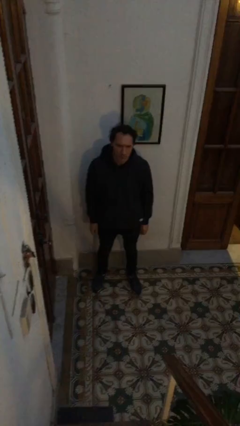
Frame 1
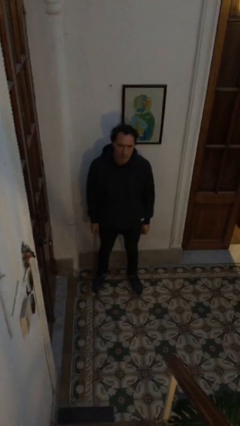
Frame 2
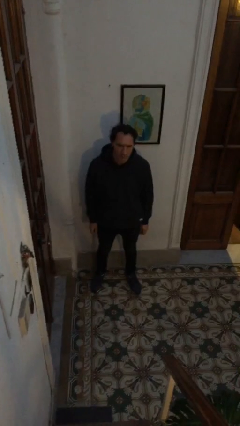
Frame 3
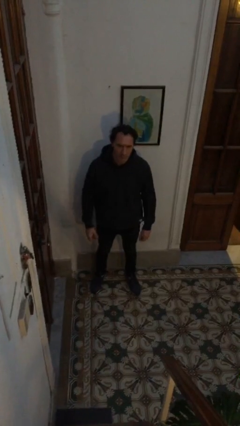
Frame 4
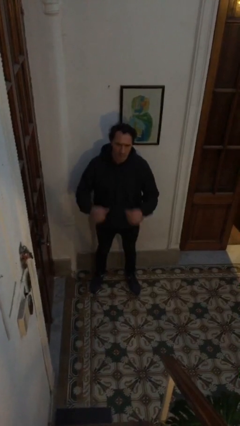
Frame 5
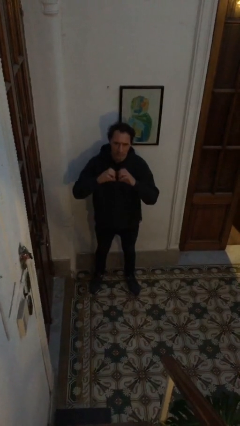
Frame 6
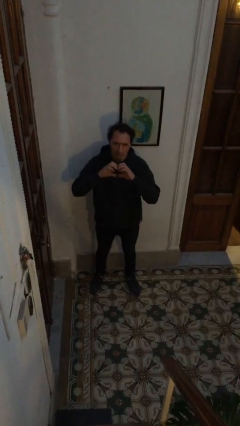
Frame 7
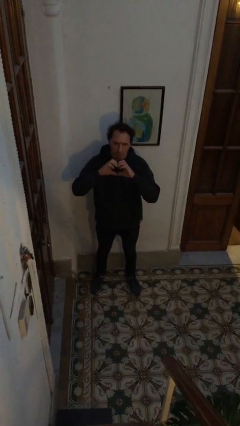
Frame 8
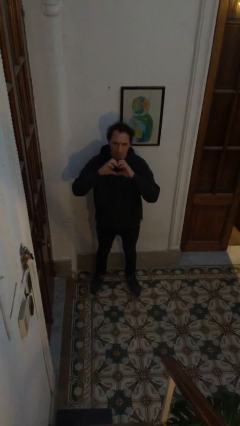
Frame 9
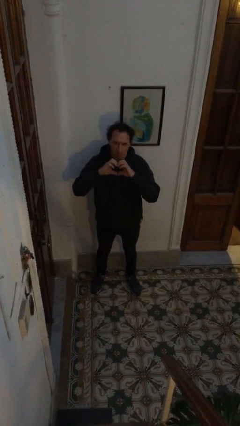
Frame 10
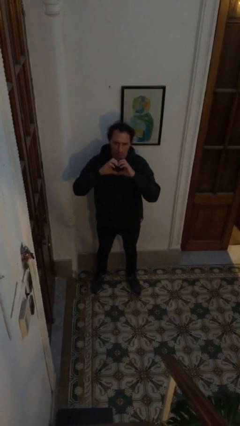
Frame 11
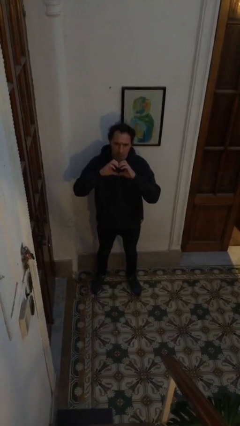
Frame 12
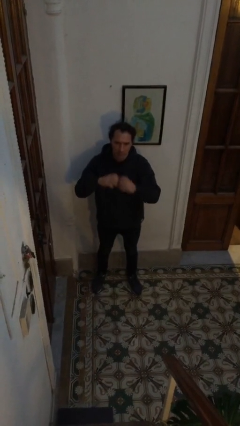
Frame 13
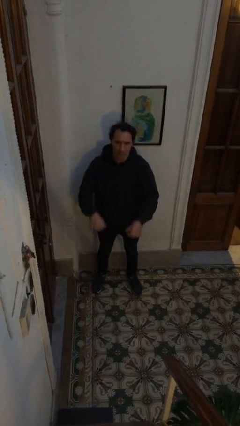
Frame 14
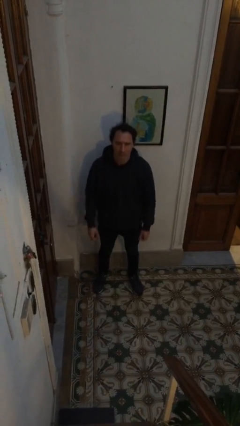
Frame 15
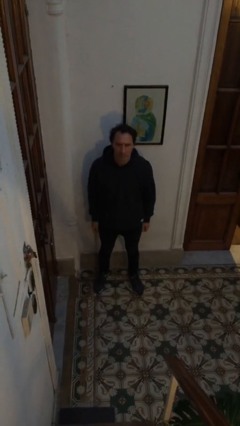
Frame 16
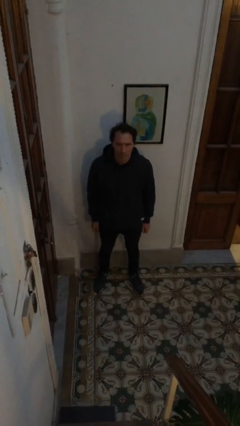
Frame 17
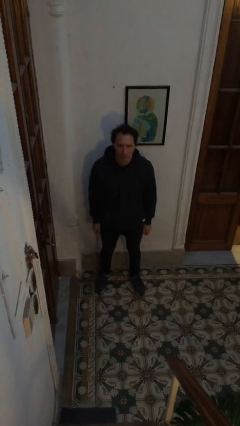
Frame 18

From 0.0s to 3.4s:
person gestures heart

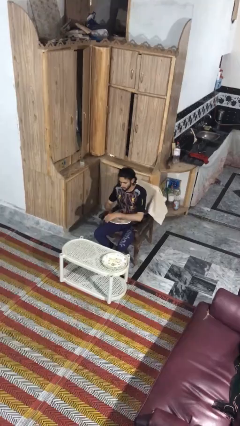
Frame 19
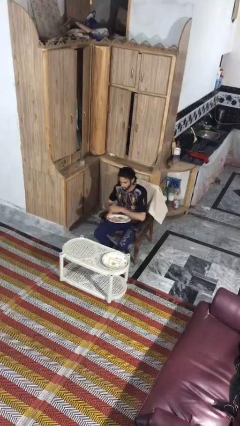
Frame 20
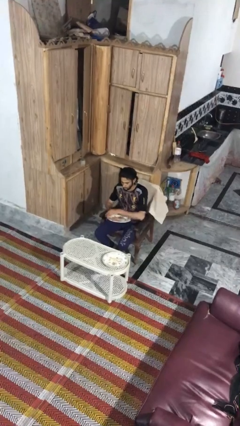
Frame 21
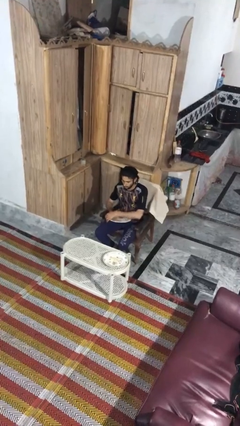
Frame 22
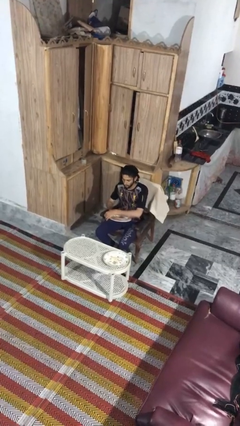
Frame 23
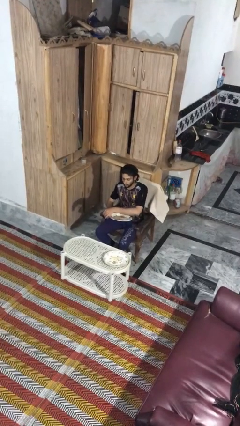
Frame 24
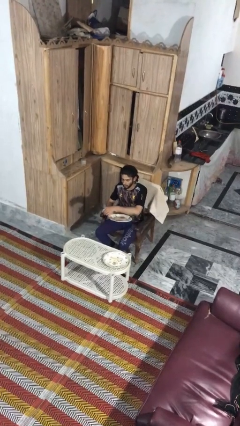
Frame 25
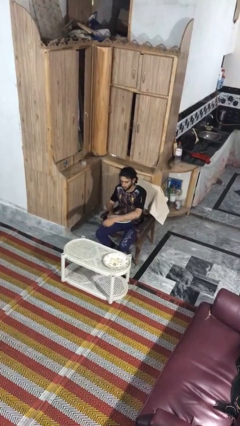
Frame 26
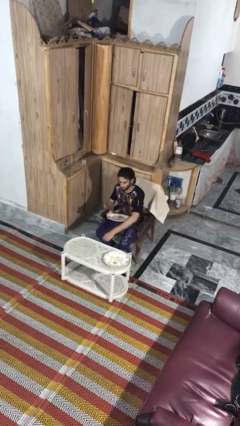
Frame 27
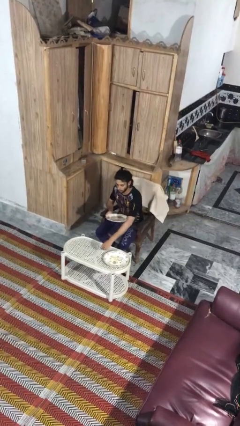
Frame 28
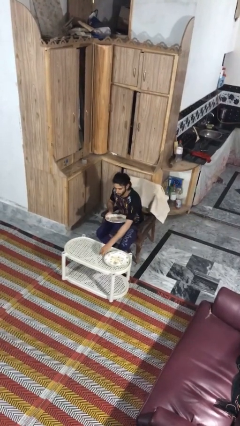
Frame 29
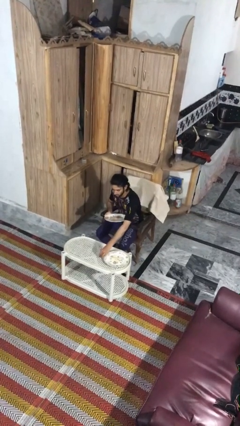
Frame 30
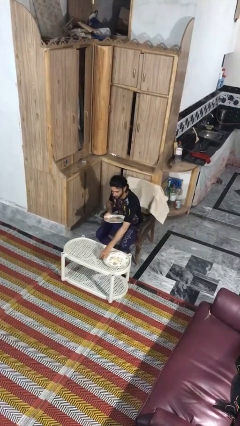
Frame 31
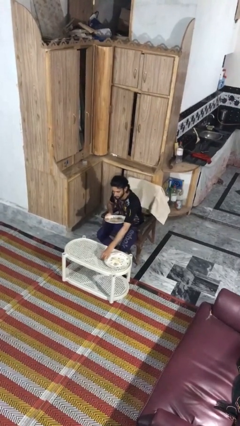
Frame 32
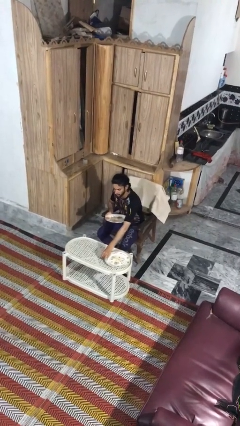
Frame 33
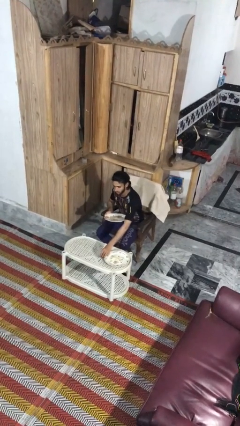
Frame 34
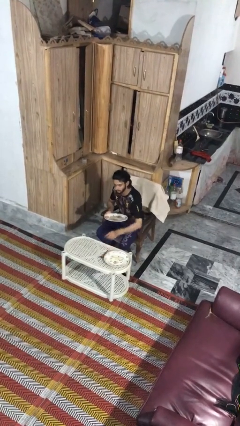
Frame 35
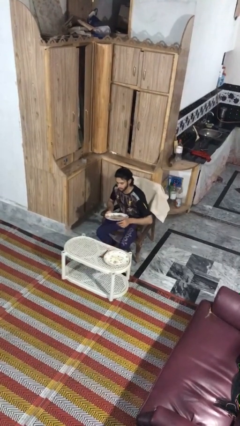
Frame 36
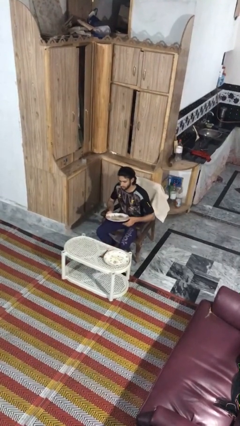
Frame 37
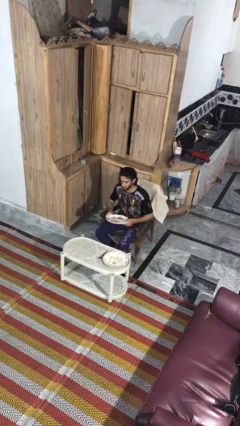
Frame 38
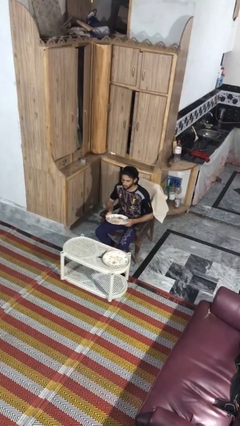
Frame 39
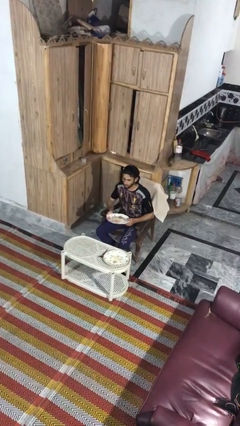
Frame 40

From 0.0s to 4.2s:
person sets table

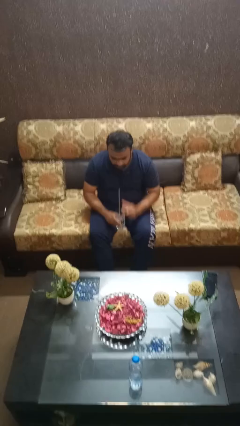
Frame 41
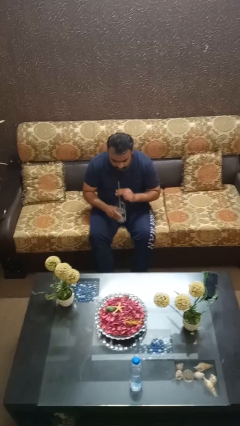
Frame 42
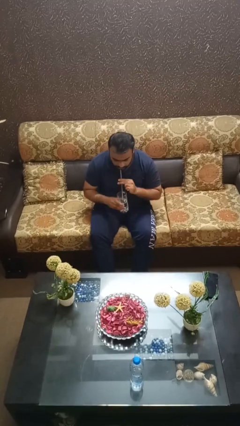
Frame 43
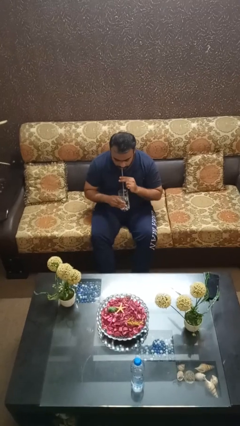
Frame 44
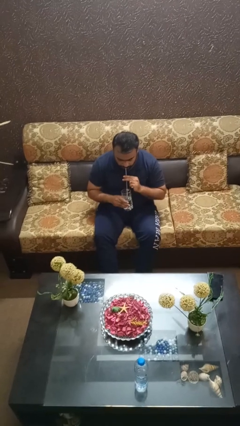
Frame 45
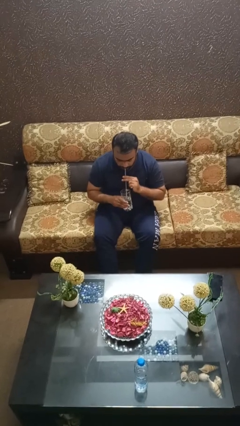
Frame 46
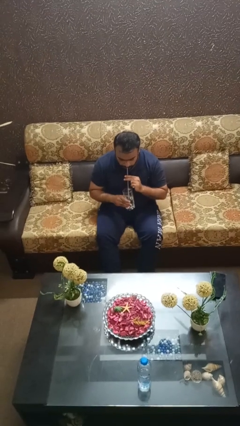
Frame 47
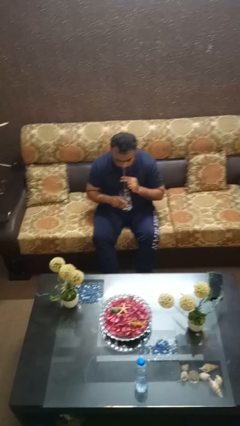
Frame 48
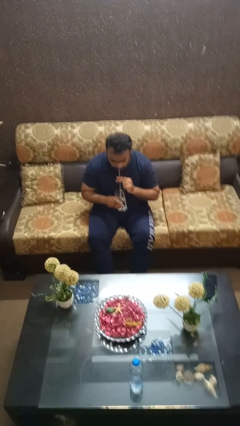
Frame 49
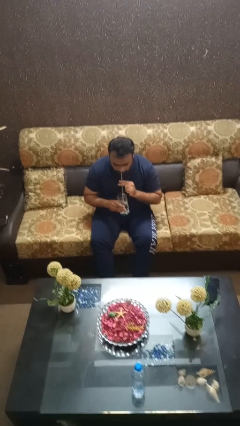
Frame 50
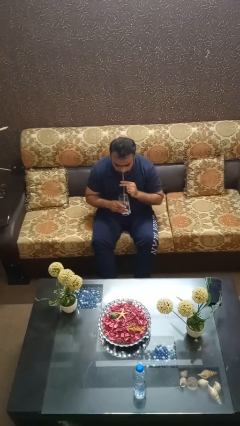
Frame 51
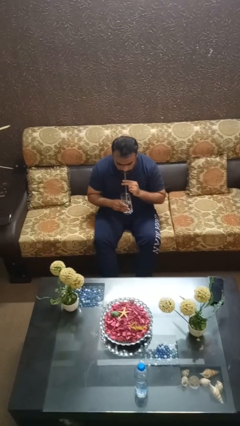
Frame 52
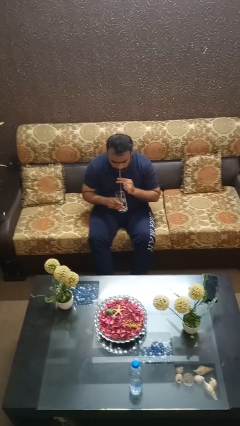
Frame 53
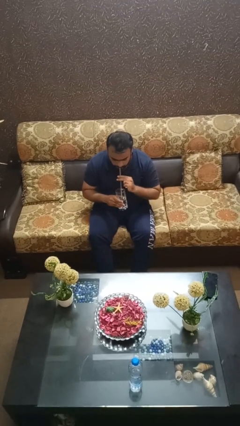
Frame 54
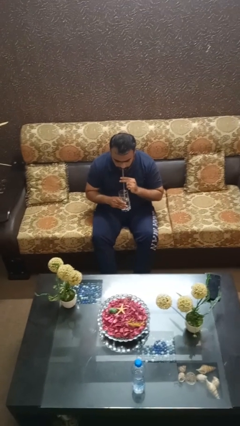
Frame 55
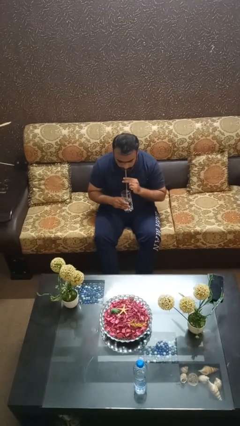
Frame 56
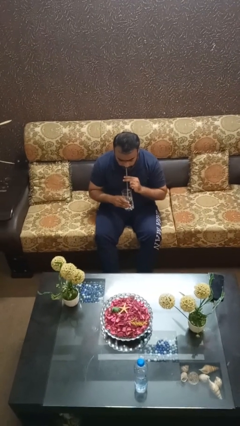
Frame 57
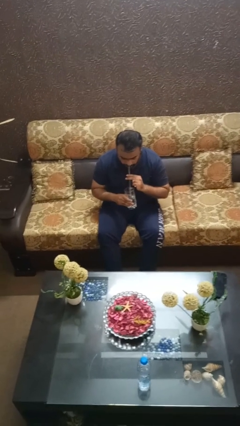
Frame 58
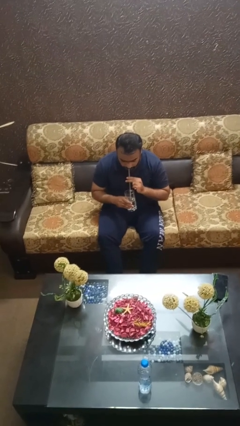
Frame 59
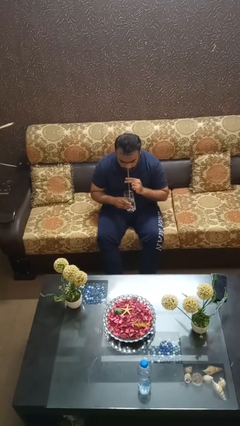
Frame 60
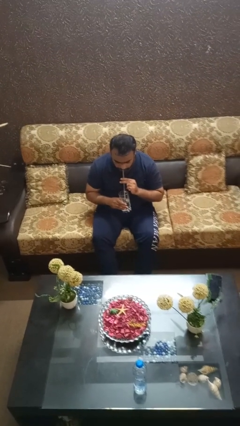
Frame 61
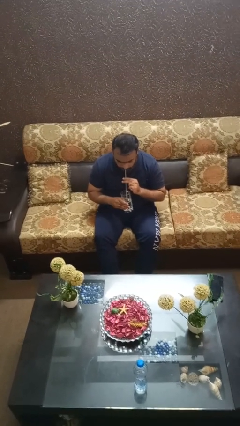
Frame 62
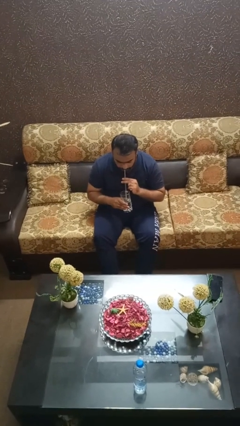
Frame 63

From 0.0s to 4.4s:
person drinks from straw

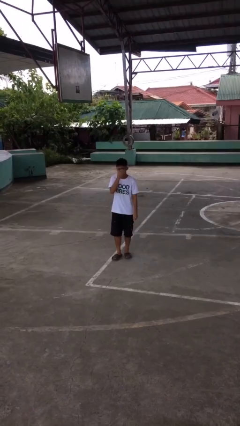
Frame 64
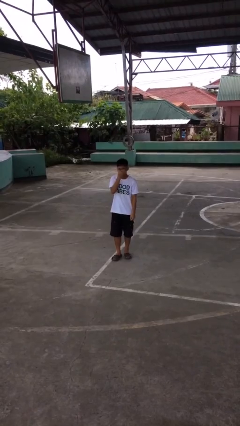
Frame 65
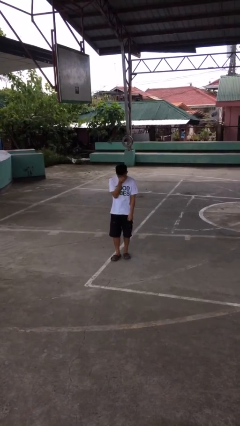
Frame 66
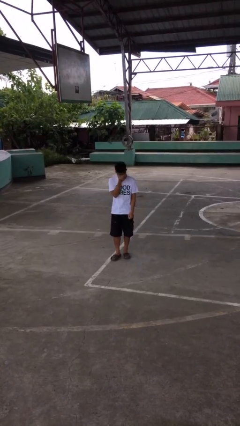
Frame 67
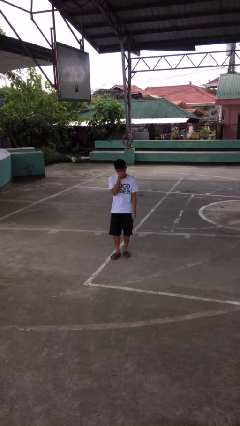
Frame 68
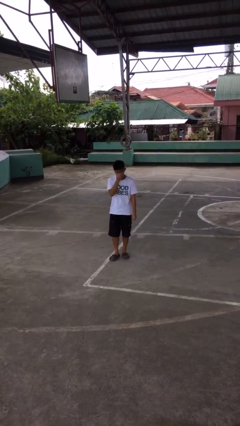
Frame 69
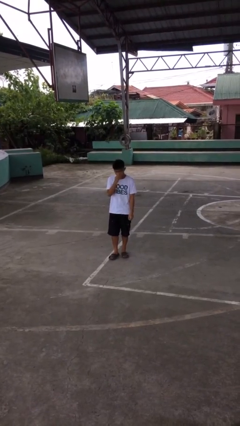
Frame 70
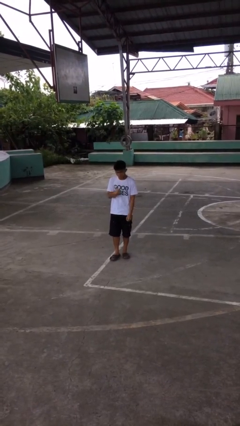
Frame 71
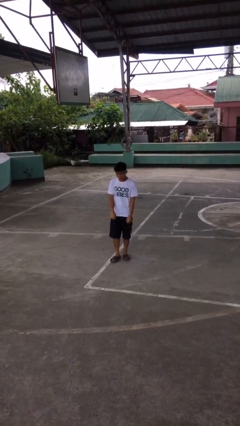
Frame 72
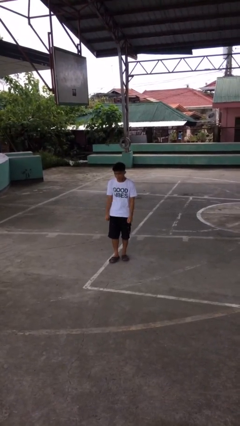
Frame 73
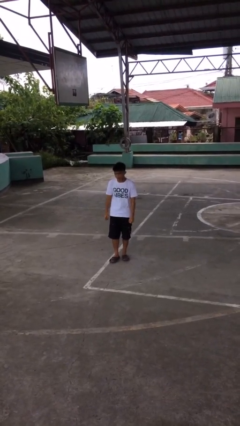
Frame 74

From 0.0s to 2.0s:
person sneezes into hand

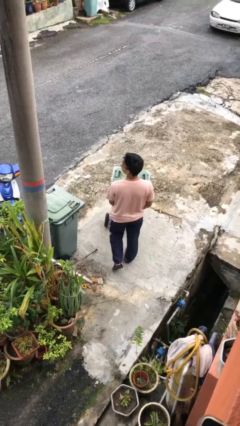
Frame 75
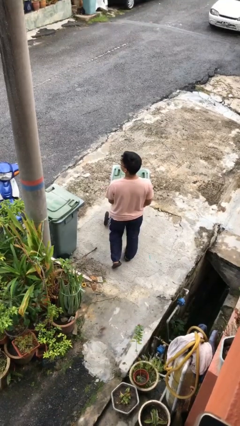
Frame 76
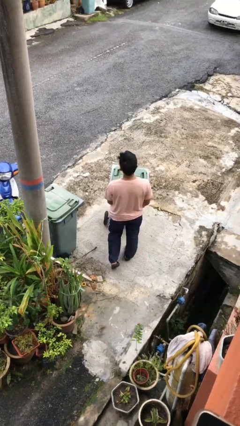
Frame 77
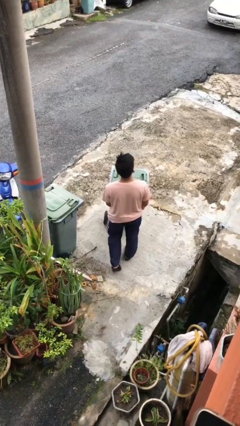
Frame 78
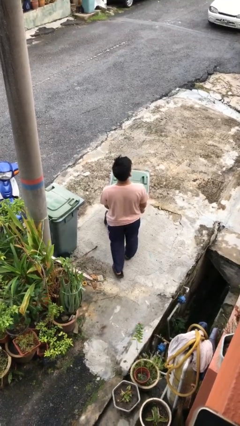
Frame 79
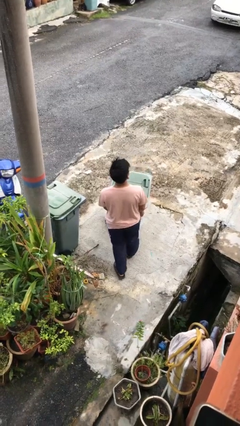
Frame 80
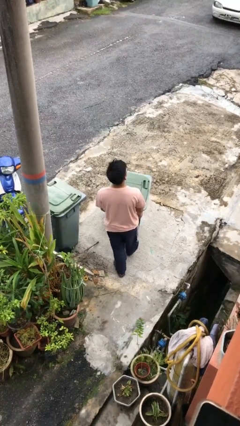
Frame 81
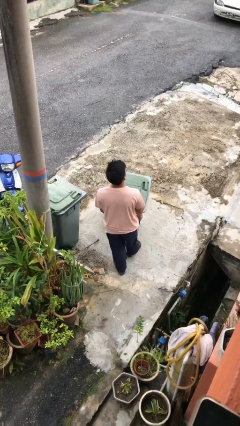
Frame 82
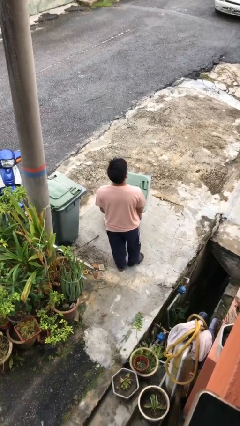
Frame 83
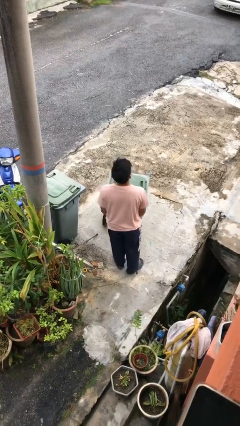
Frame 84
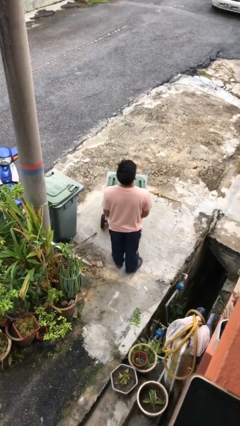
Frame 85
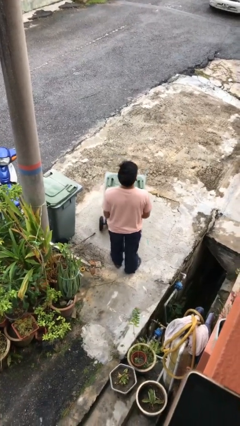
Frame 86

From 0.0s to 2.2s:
person pulls wheeled trashcan

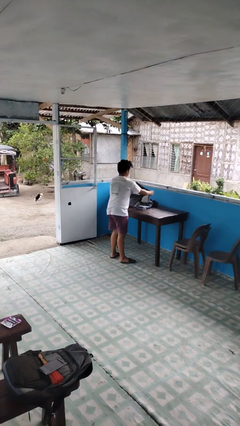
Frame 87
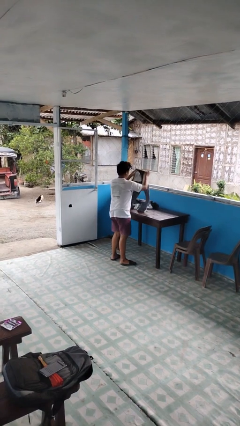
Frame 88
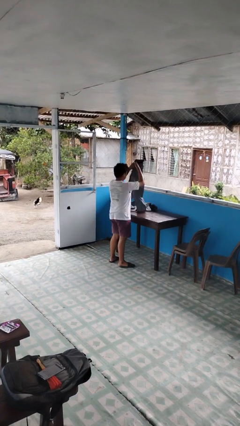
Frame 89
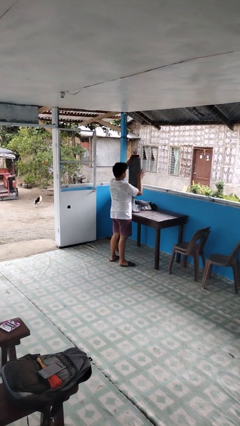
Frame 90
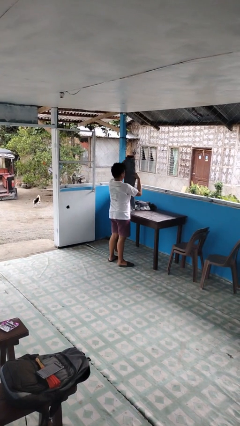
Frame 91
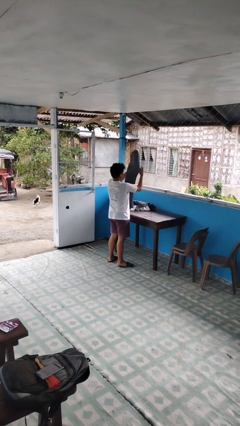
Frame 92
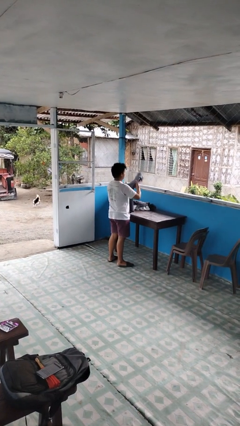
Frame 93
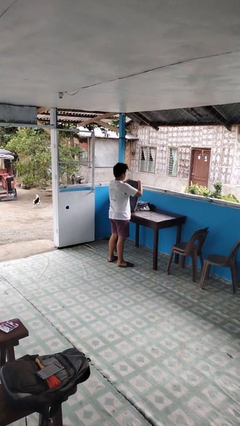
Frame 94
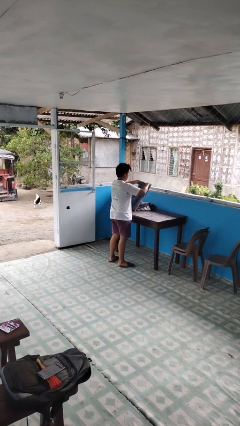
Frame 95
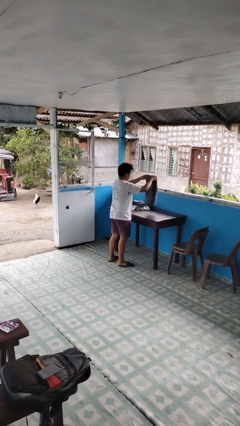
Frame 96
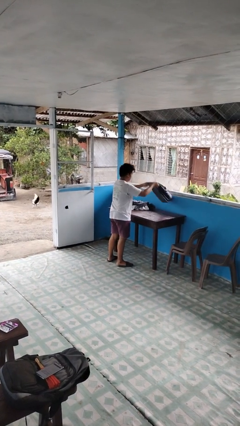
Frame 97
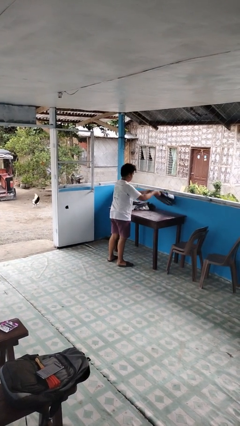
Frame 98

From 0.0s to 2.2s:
person folds pants
